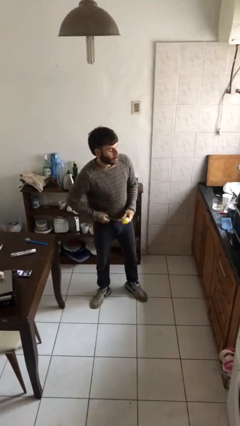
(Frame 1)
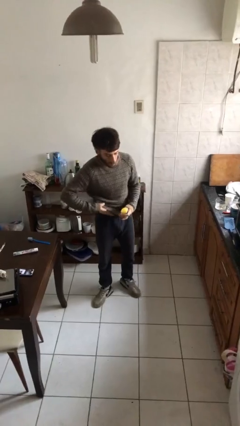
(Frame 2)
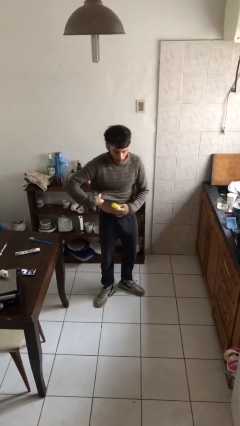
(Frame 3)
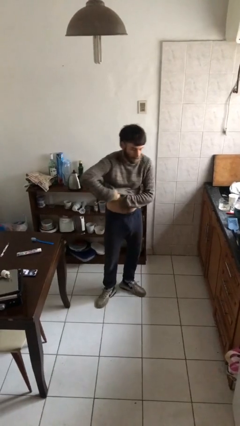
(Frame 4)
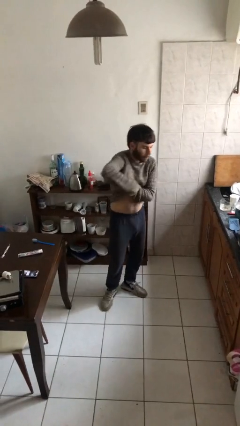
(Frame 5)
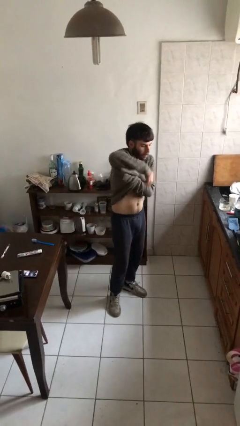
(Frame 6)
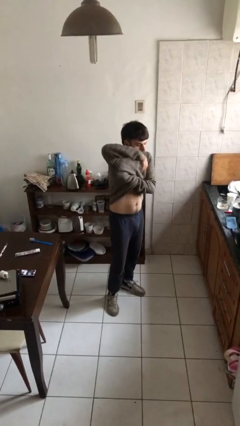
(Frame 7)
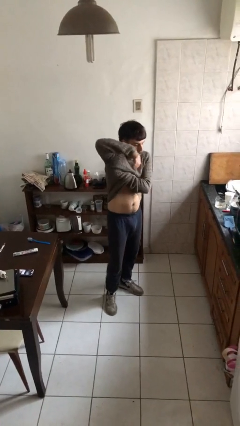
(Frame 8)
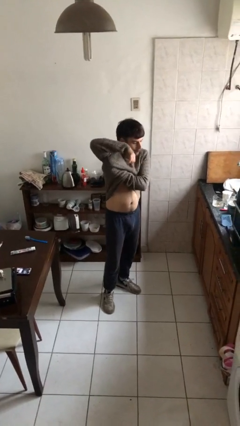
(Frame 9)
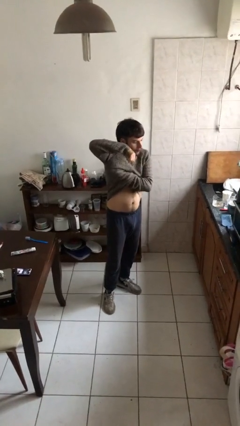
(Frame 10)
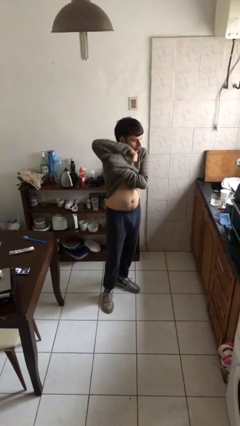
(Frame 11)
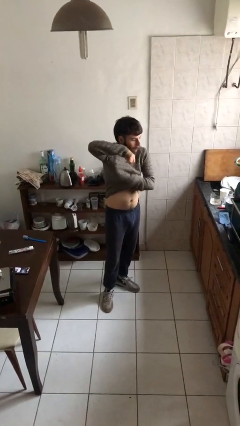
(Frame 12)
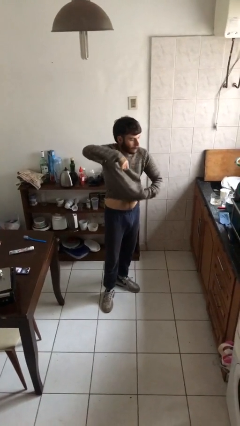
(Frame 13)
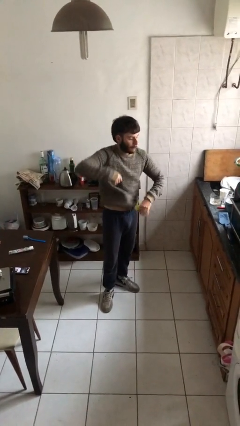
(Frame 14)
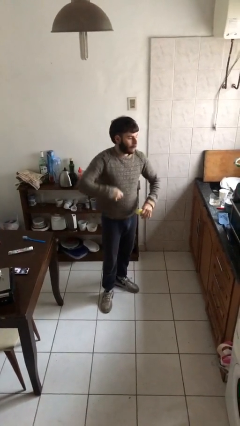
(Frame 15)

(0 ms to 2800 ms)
person applies deodorant

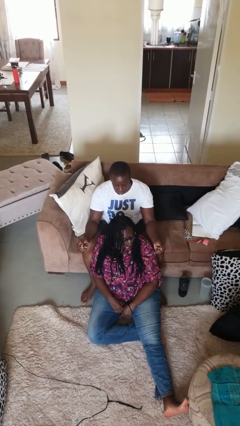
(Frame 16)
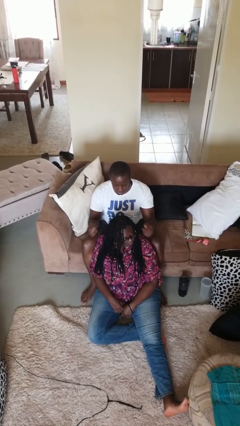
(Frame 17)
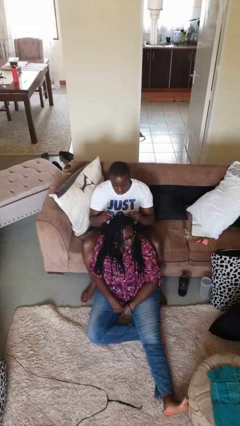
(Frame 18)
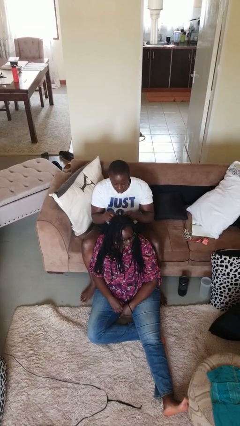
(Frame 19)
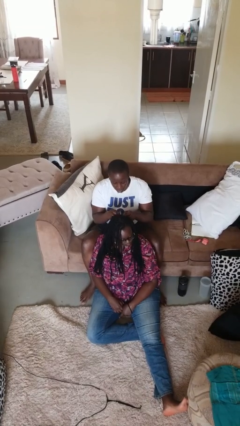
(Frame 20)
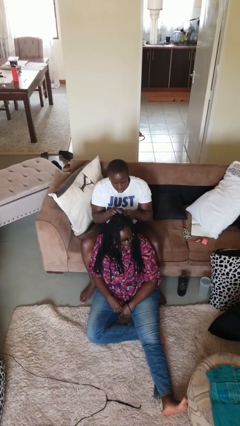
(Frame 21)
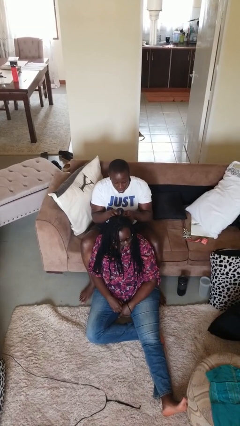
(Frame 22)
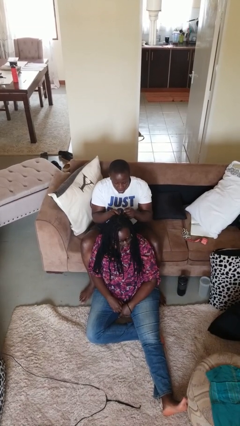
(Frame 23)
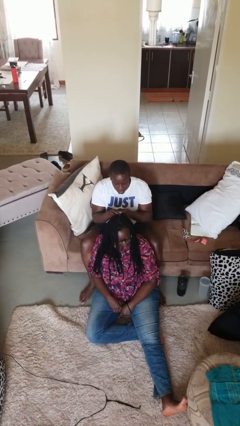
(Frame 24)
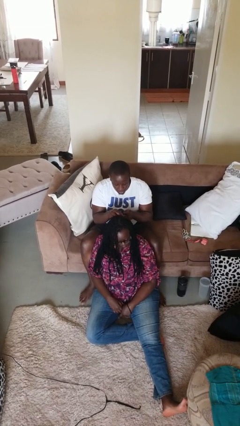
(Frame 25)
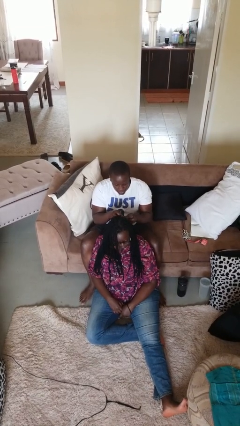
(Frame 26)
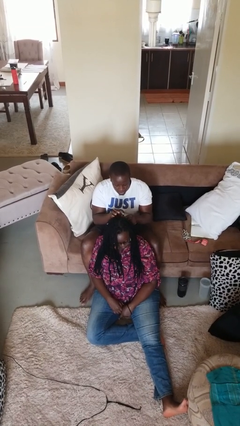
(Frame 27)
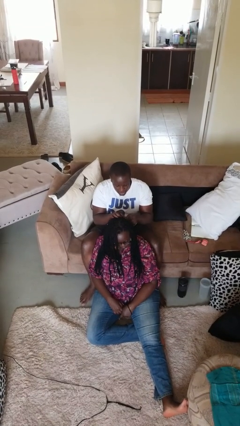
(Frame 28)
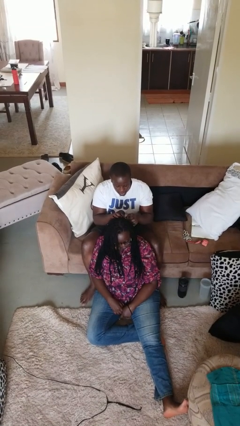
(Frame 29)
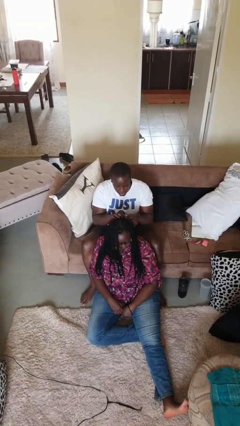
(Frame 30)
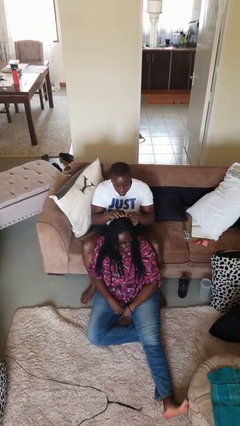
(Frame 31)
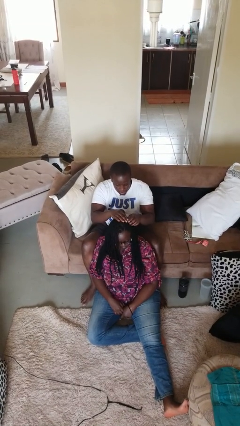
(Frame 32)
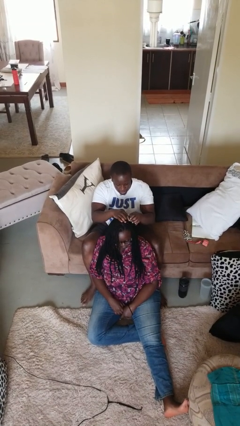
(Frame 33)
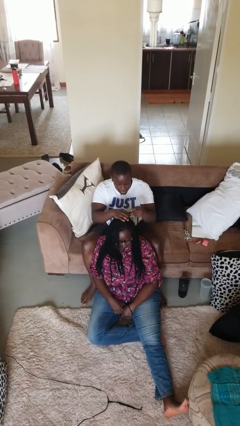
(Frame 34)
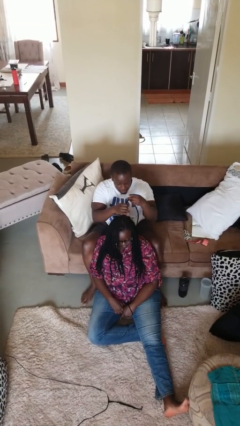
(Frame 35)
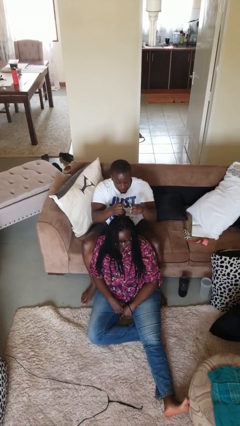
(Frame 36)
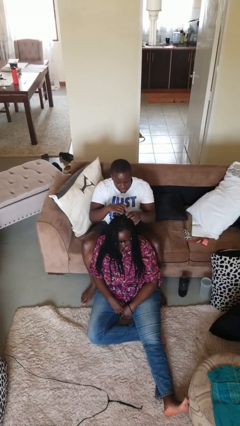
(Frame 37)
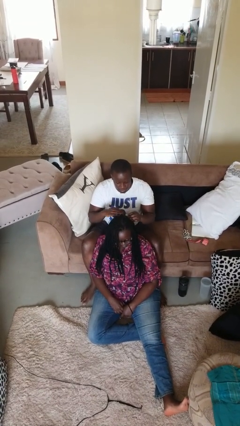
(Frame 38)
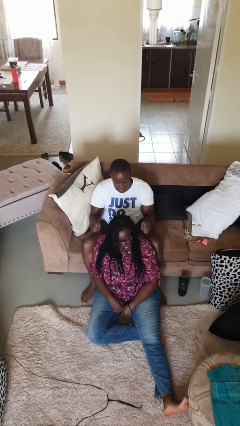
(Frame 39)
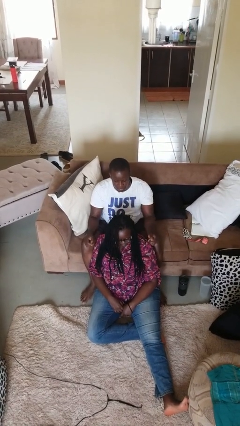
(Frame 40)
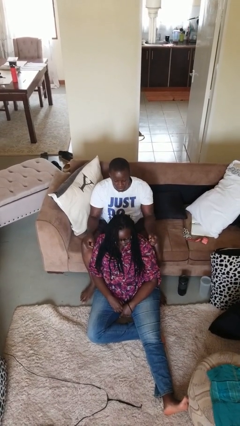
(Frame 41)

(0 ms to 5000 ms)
person braids hair of person

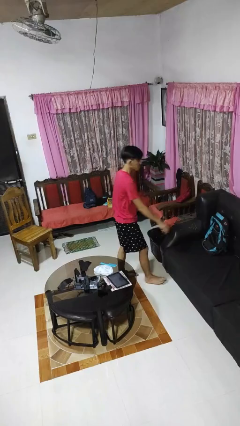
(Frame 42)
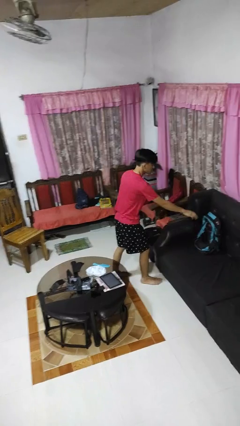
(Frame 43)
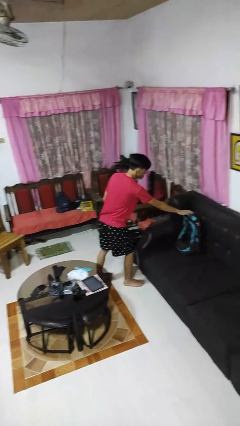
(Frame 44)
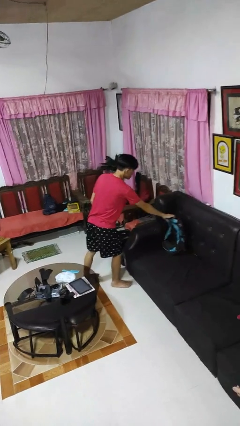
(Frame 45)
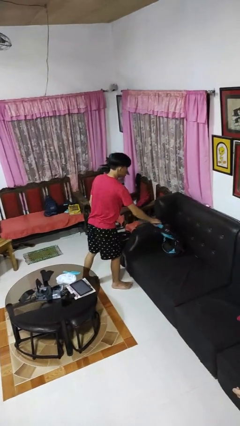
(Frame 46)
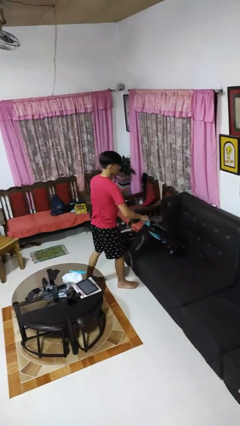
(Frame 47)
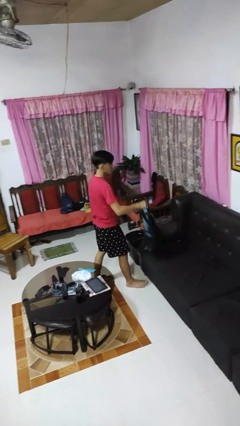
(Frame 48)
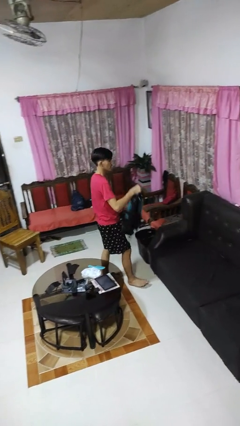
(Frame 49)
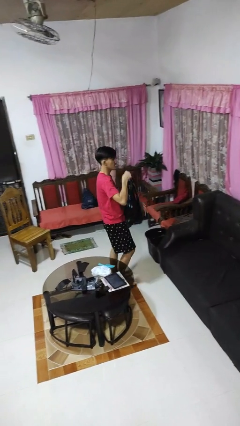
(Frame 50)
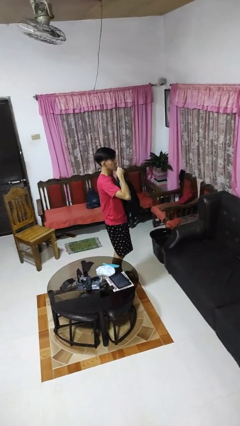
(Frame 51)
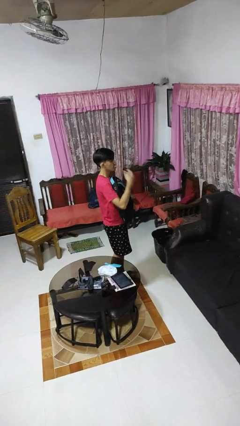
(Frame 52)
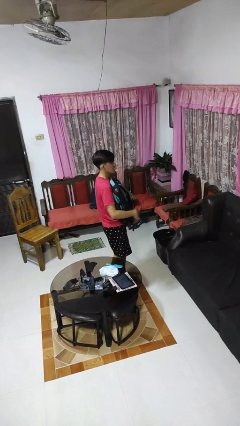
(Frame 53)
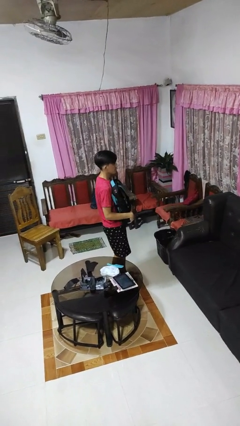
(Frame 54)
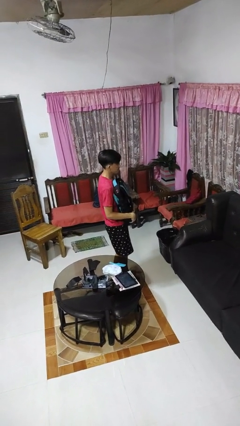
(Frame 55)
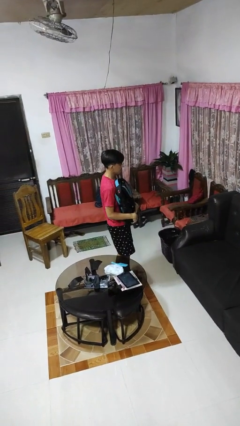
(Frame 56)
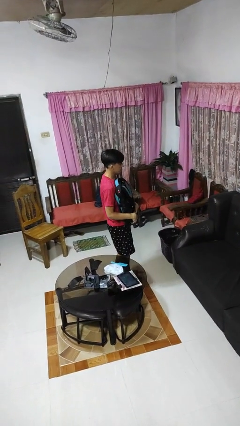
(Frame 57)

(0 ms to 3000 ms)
person picks up object from couch

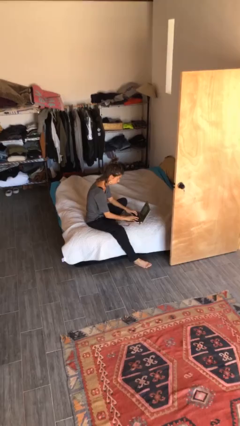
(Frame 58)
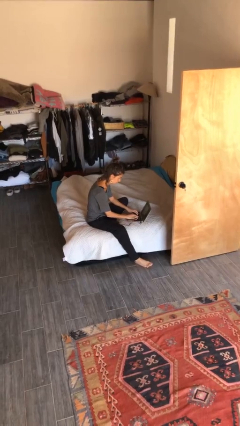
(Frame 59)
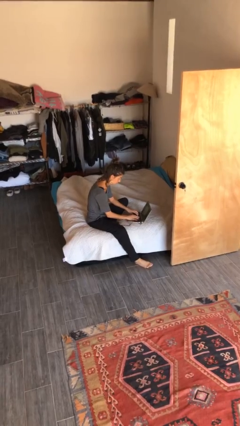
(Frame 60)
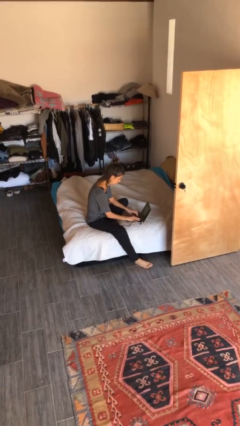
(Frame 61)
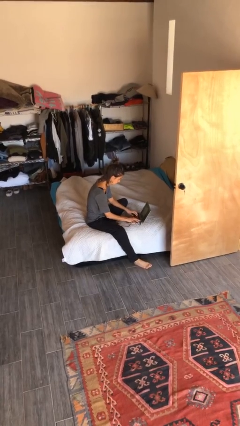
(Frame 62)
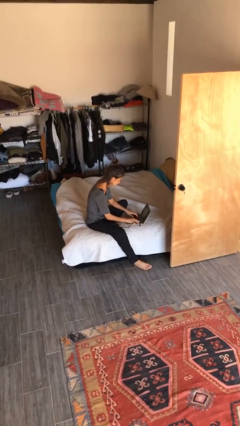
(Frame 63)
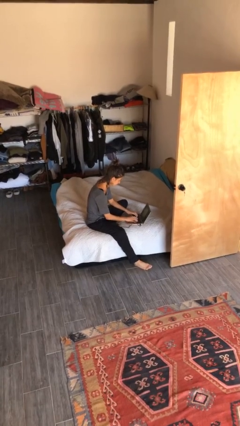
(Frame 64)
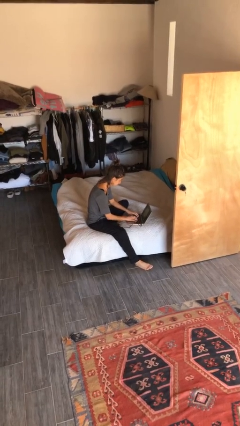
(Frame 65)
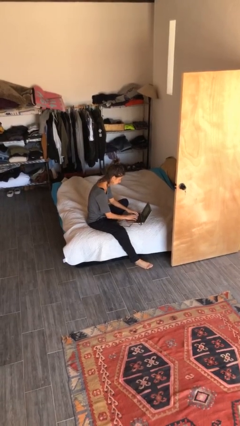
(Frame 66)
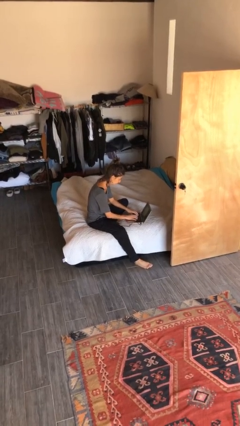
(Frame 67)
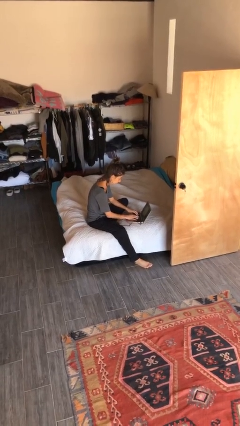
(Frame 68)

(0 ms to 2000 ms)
person interacts with laptop

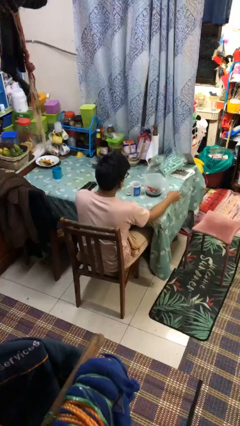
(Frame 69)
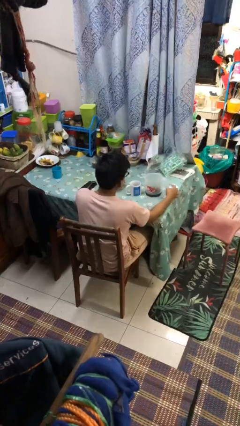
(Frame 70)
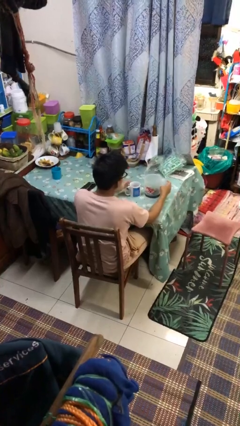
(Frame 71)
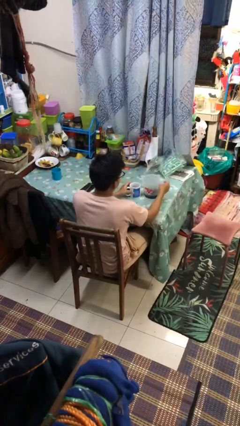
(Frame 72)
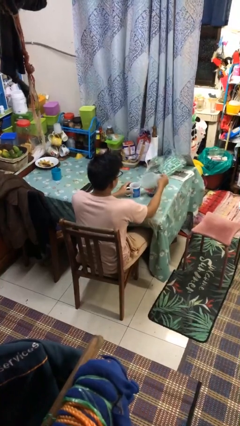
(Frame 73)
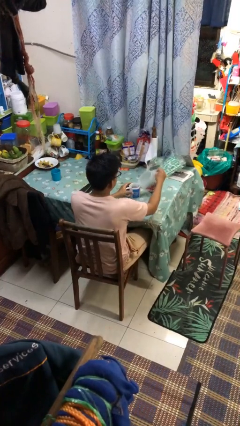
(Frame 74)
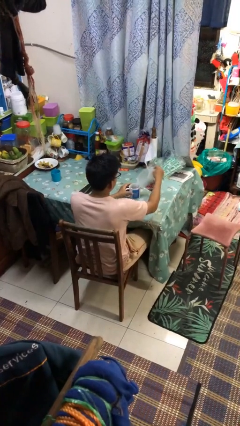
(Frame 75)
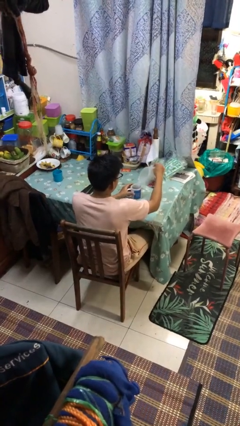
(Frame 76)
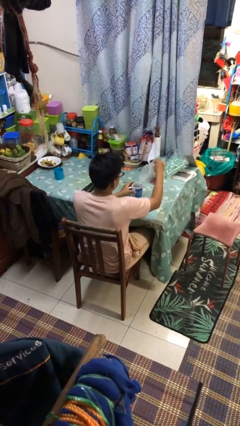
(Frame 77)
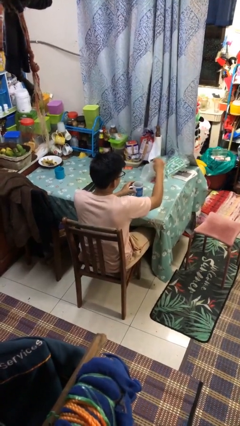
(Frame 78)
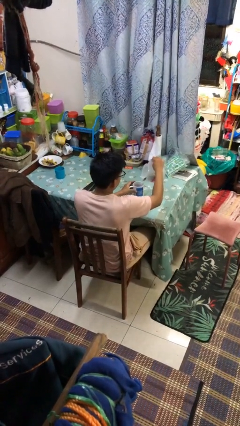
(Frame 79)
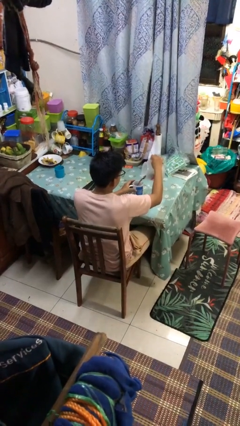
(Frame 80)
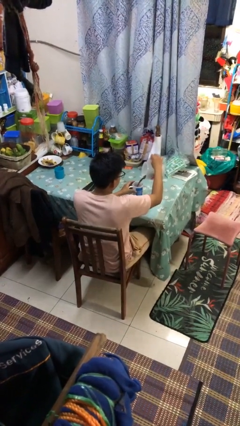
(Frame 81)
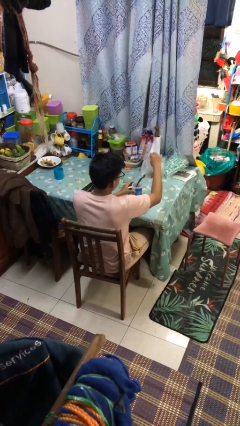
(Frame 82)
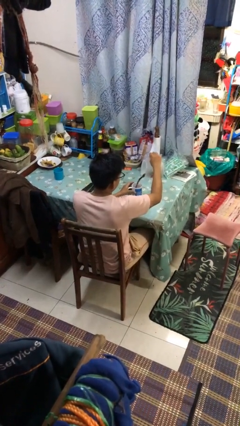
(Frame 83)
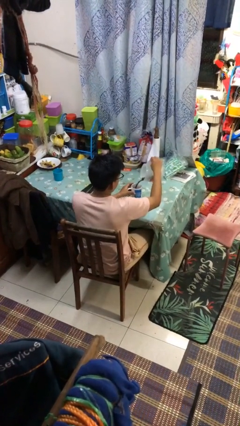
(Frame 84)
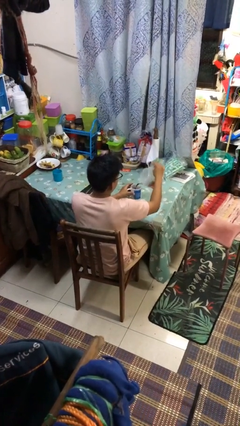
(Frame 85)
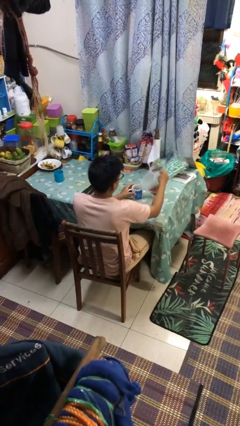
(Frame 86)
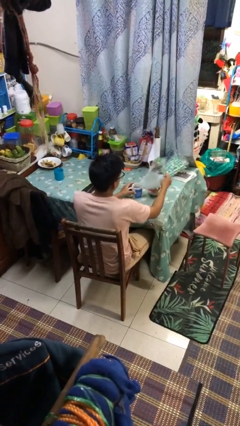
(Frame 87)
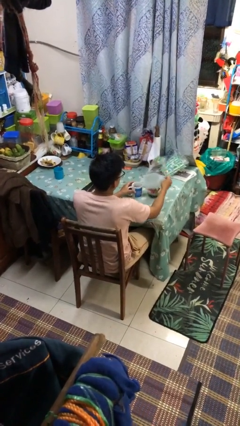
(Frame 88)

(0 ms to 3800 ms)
person pours coffee into mug

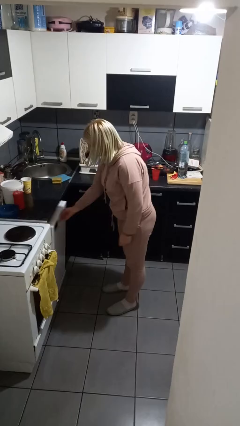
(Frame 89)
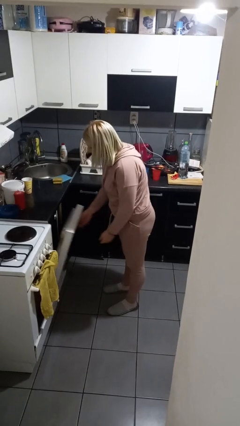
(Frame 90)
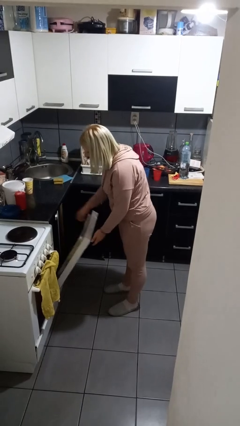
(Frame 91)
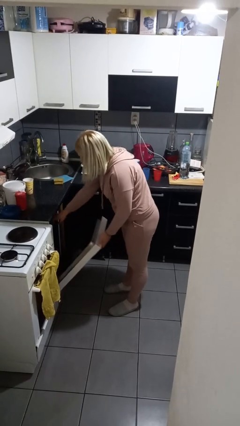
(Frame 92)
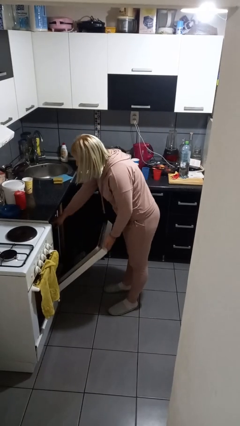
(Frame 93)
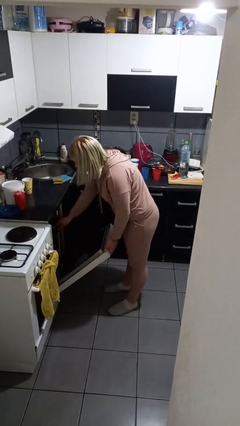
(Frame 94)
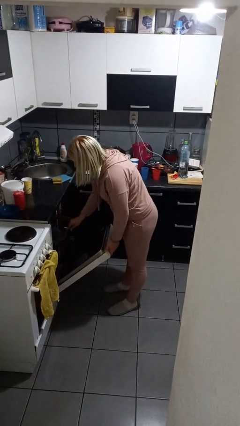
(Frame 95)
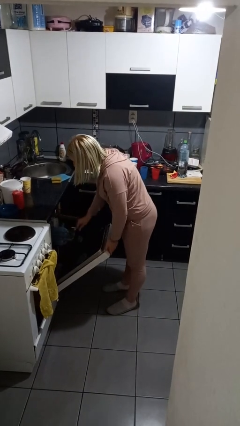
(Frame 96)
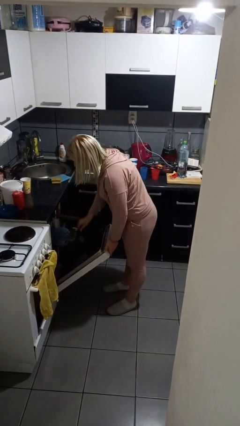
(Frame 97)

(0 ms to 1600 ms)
person opens dishwasher
